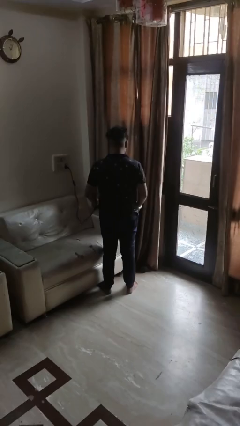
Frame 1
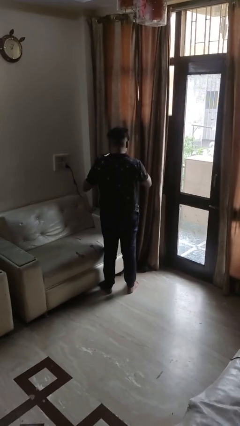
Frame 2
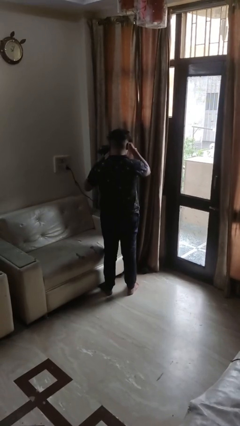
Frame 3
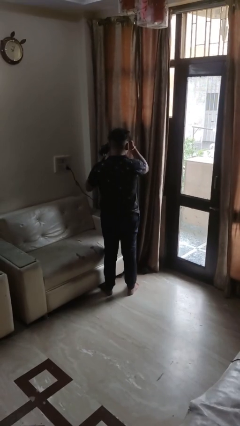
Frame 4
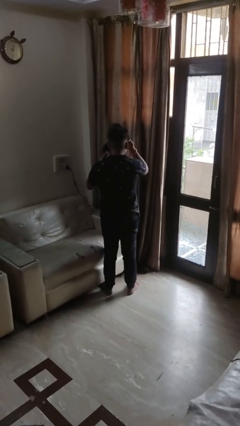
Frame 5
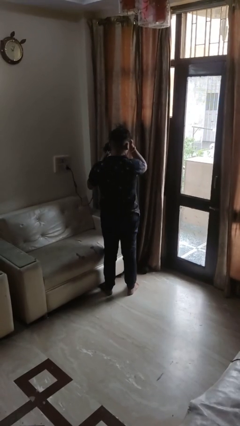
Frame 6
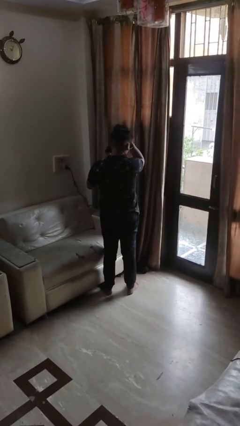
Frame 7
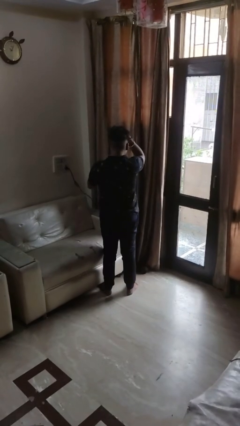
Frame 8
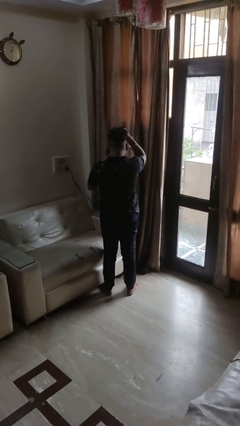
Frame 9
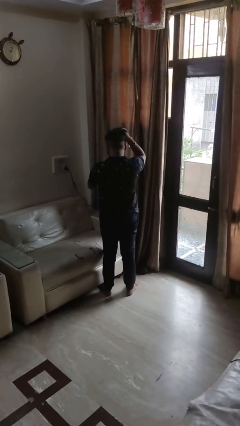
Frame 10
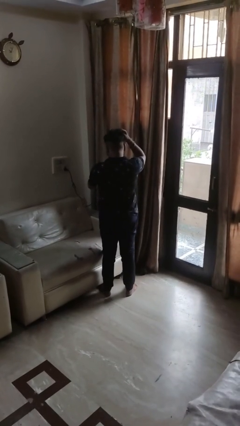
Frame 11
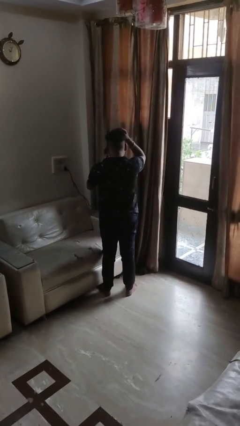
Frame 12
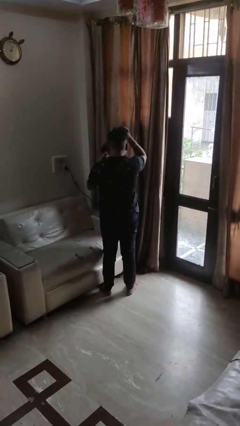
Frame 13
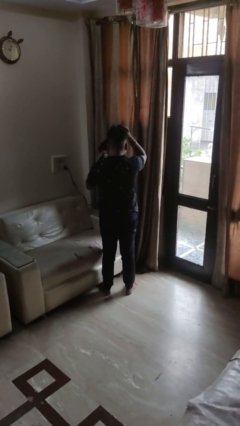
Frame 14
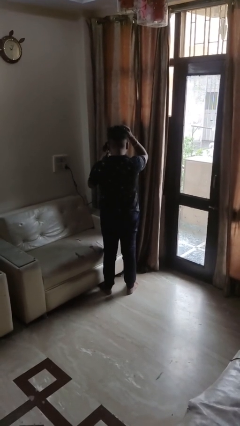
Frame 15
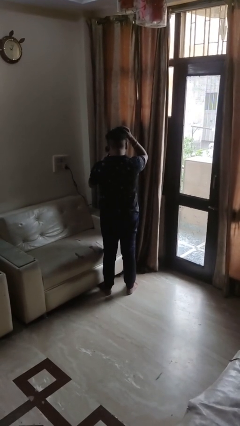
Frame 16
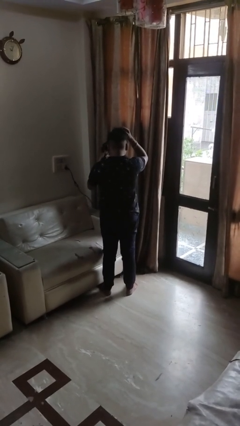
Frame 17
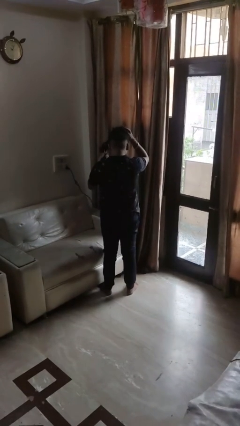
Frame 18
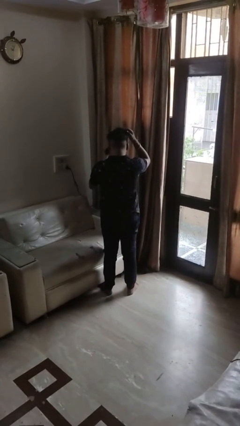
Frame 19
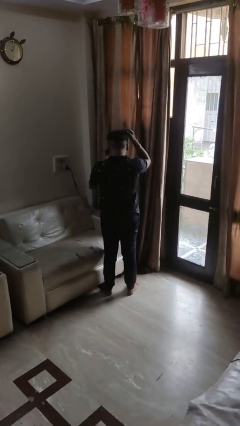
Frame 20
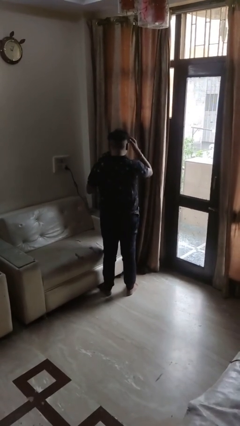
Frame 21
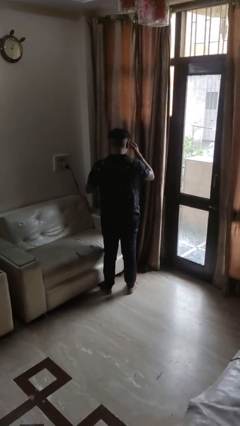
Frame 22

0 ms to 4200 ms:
person dries hair with hairdryer

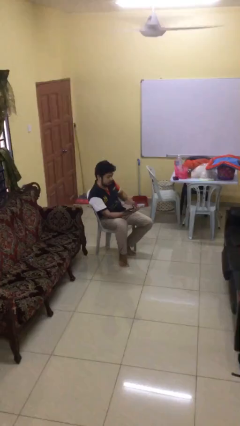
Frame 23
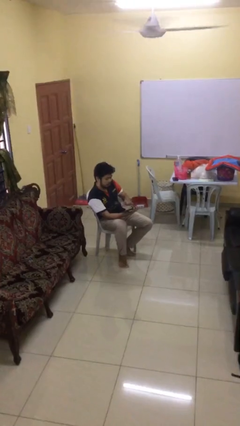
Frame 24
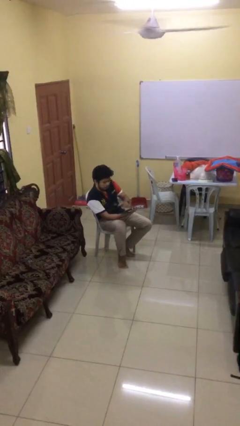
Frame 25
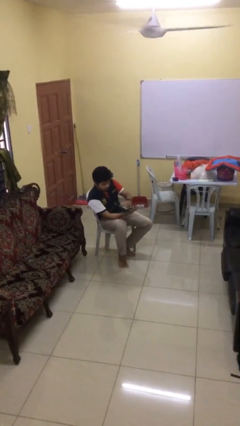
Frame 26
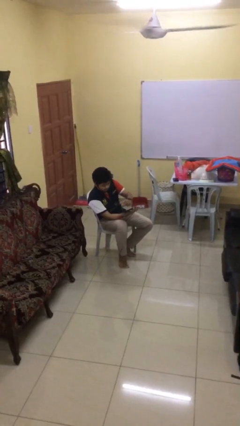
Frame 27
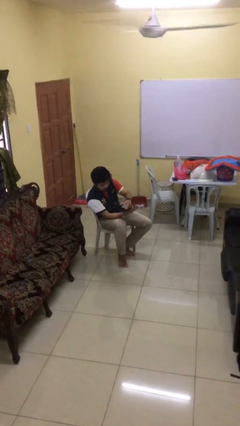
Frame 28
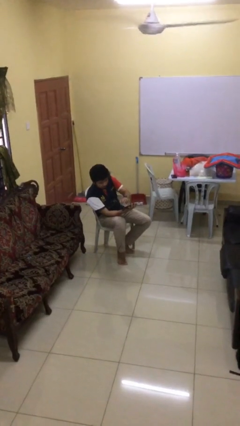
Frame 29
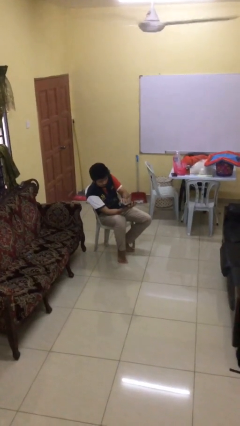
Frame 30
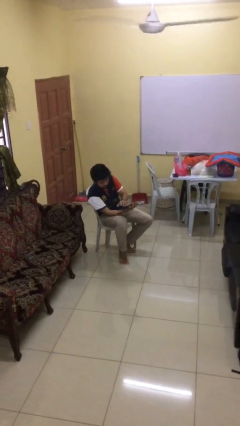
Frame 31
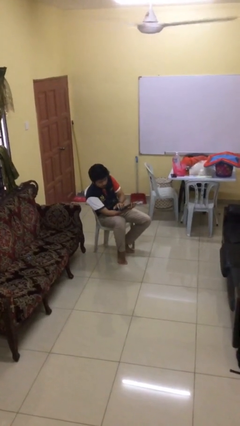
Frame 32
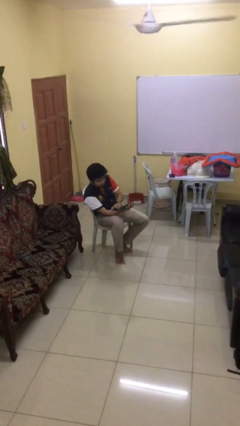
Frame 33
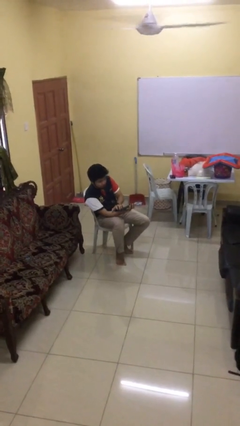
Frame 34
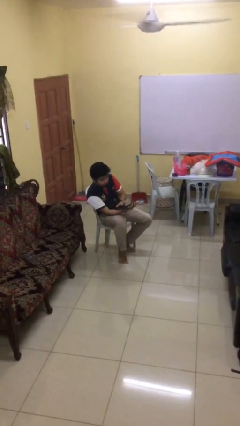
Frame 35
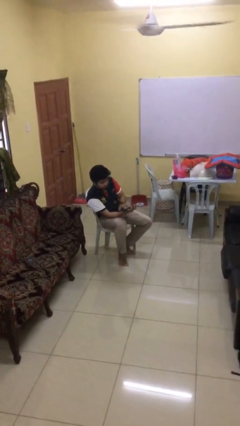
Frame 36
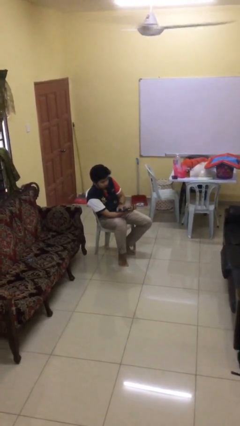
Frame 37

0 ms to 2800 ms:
person interacts with tablet

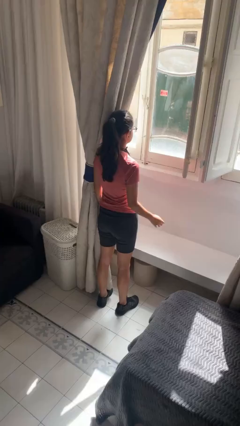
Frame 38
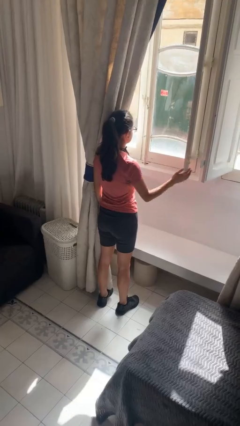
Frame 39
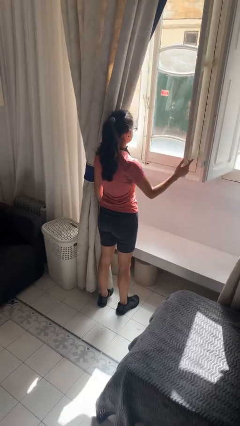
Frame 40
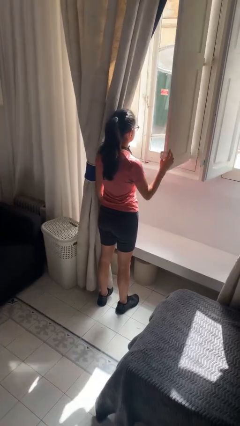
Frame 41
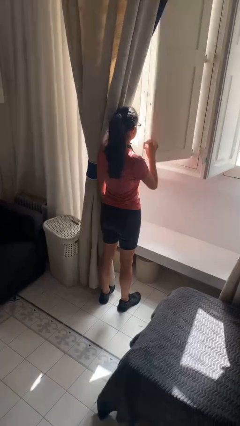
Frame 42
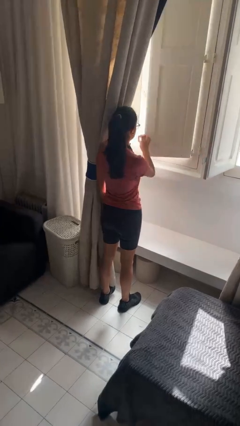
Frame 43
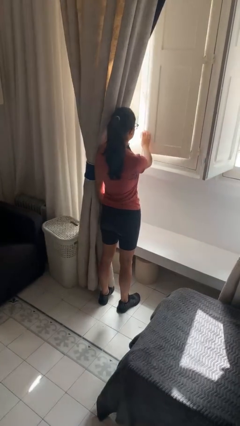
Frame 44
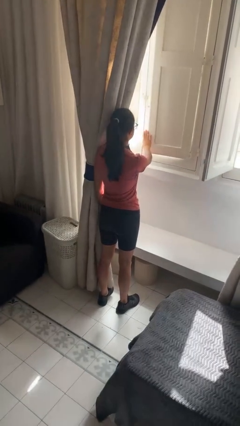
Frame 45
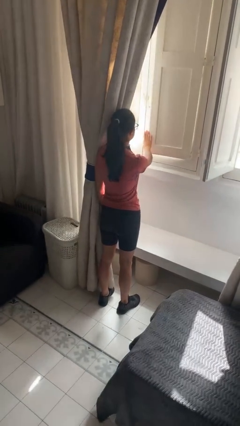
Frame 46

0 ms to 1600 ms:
person closes home window

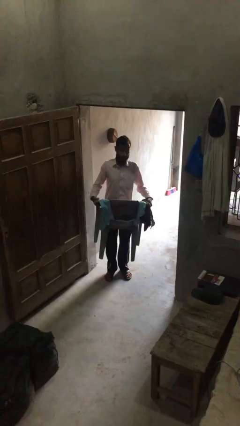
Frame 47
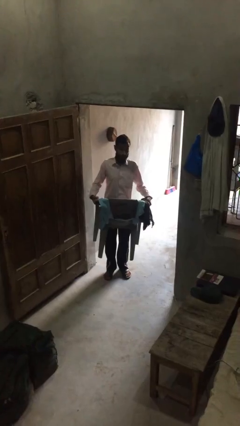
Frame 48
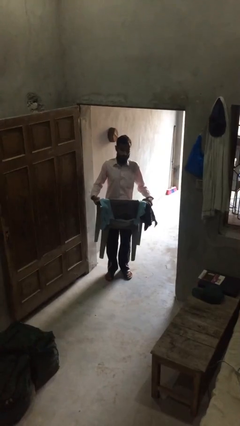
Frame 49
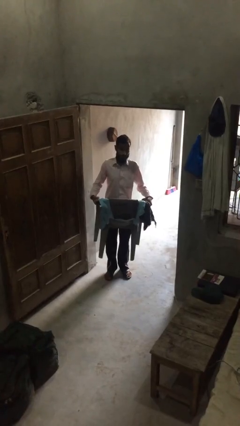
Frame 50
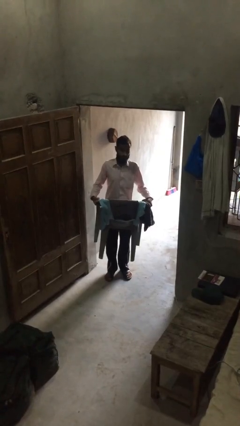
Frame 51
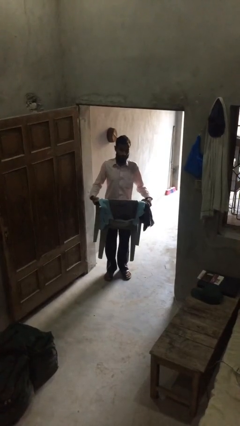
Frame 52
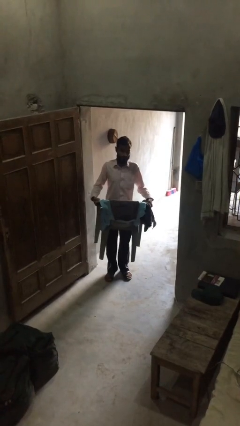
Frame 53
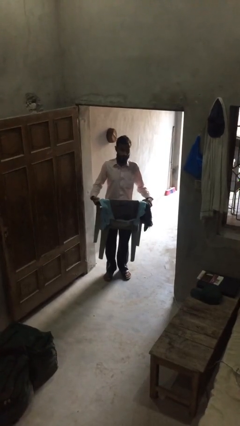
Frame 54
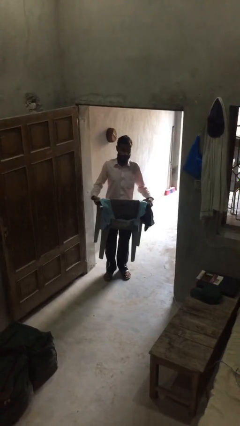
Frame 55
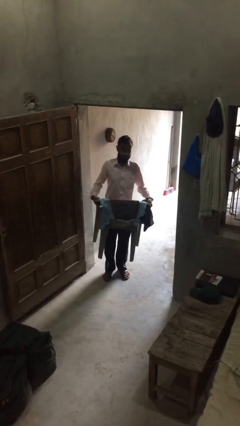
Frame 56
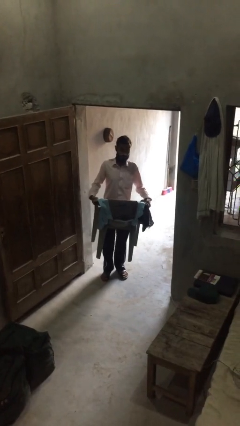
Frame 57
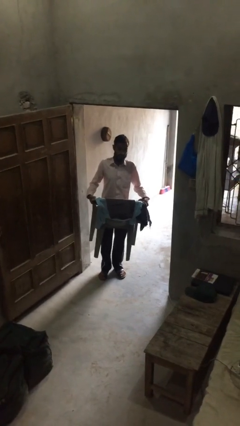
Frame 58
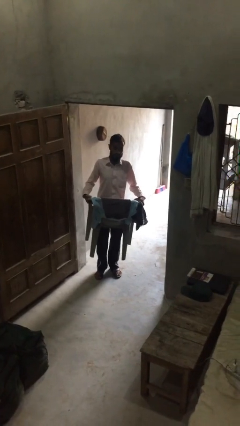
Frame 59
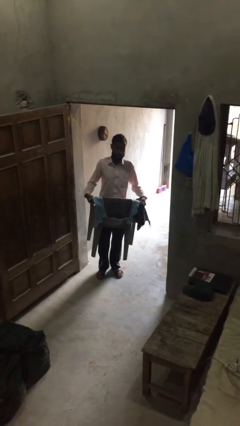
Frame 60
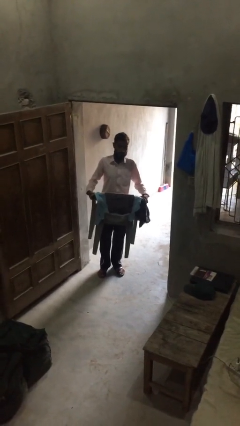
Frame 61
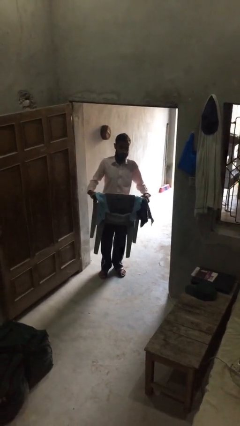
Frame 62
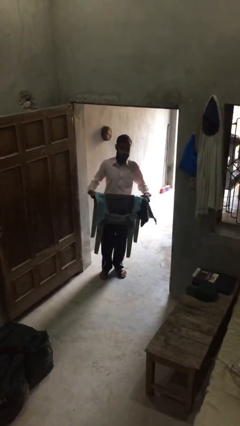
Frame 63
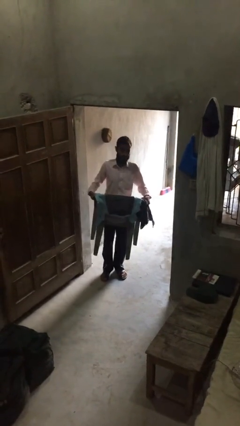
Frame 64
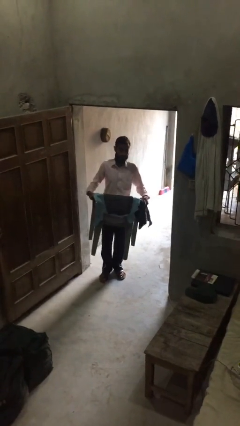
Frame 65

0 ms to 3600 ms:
person carries heavy object

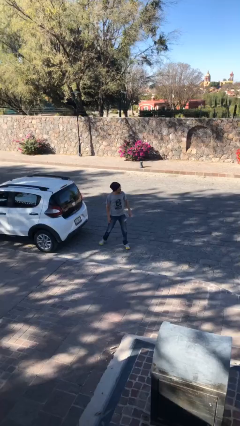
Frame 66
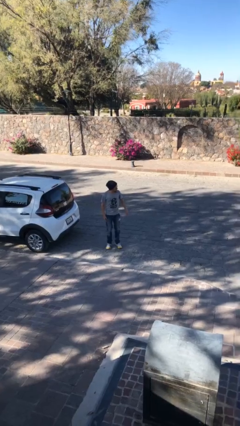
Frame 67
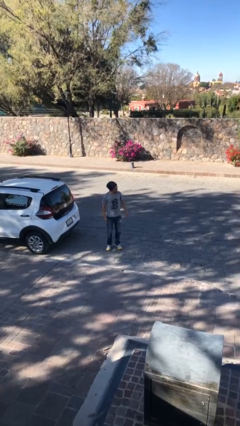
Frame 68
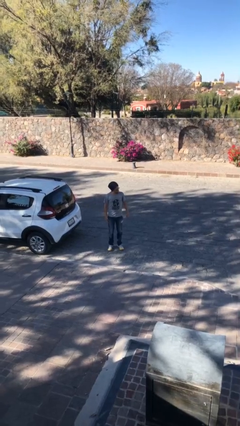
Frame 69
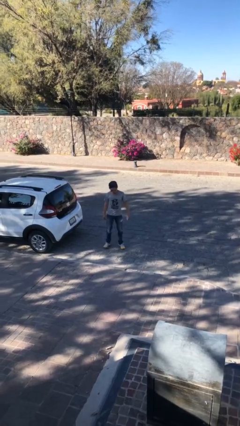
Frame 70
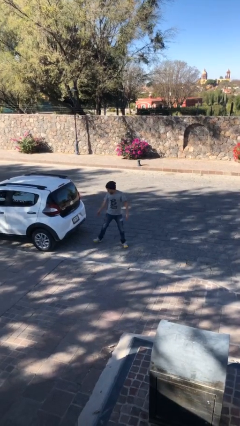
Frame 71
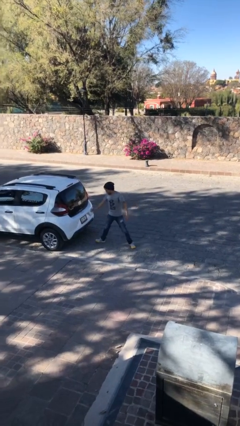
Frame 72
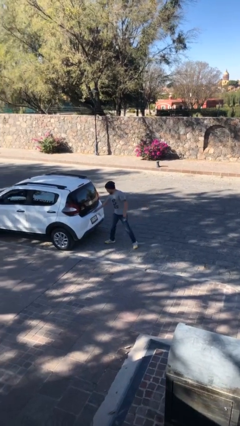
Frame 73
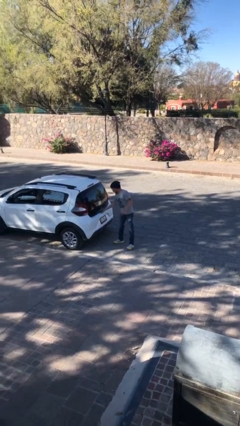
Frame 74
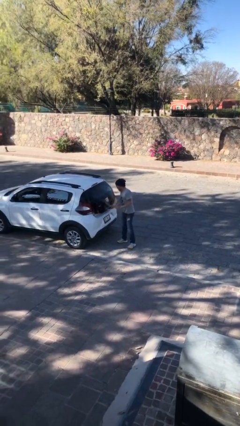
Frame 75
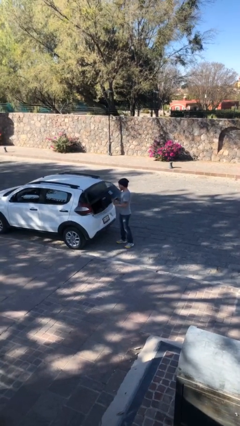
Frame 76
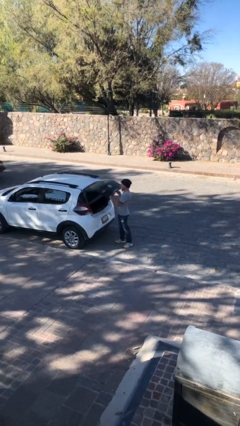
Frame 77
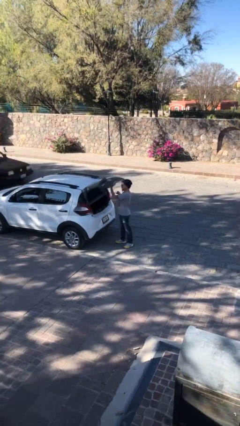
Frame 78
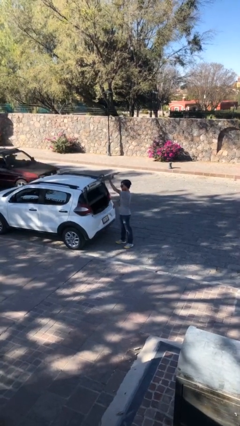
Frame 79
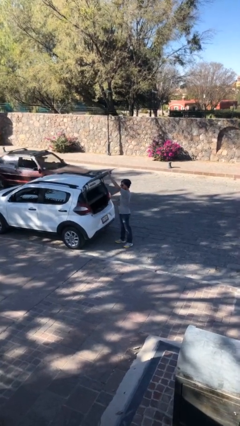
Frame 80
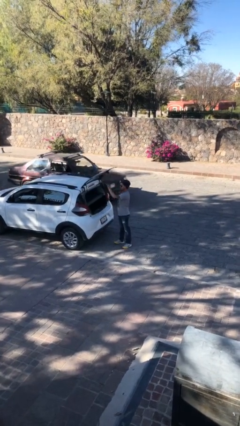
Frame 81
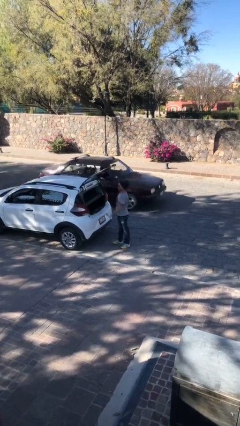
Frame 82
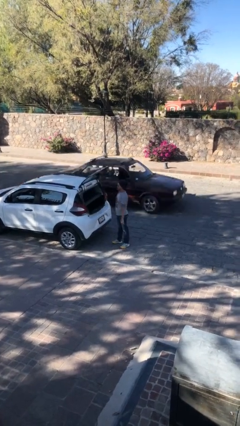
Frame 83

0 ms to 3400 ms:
person opens car trunk

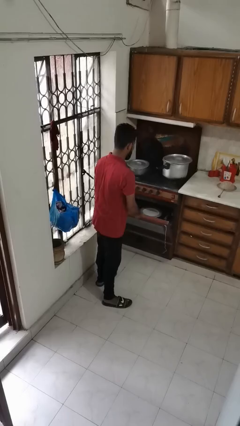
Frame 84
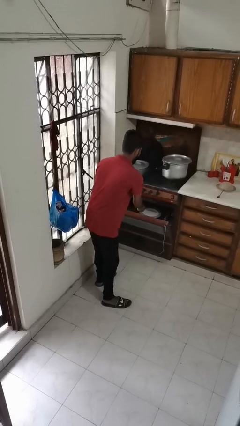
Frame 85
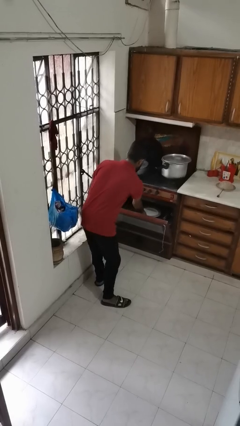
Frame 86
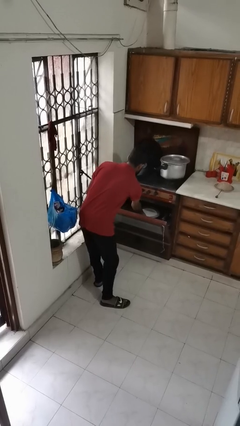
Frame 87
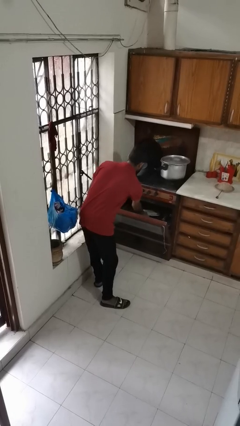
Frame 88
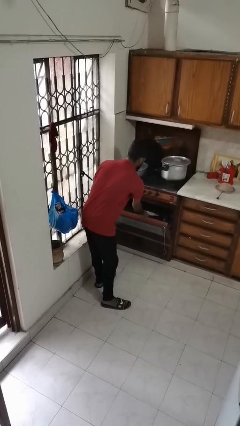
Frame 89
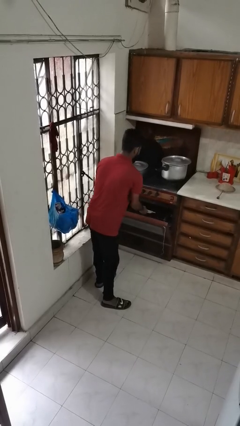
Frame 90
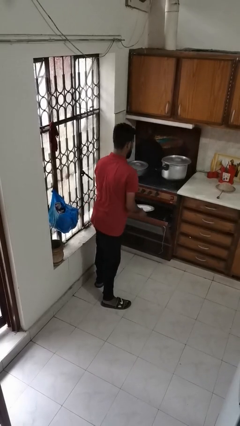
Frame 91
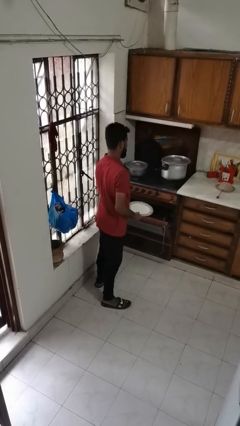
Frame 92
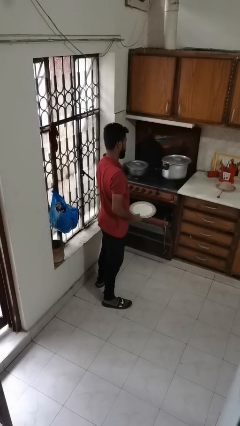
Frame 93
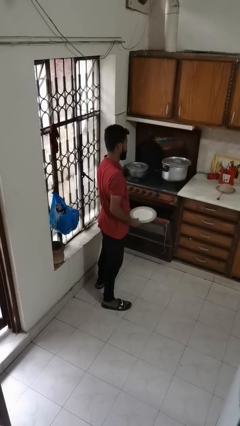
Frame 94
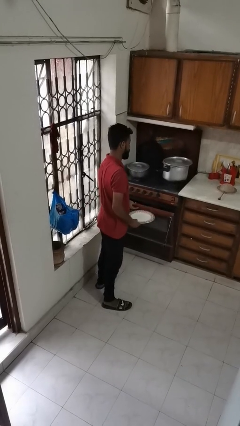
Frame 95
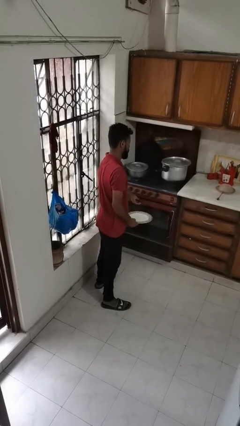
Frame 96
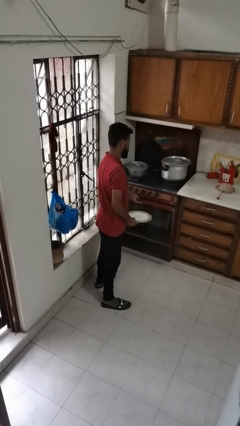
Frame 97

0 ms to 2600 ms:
person takes object from oven
